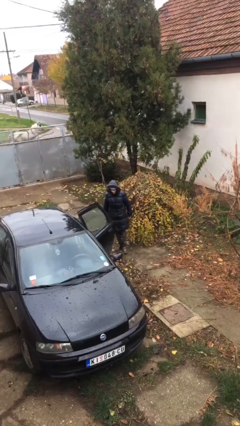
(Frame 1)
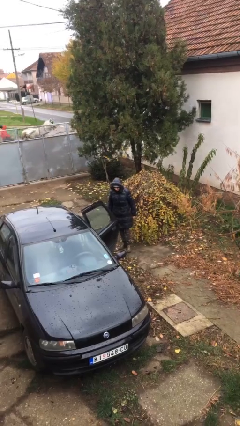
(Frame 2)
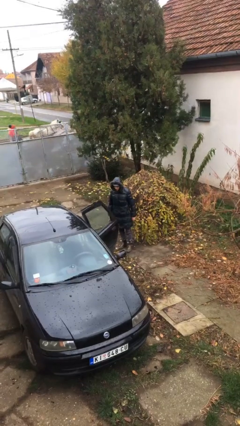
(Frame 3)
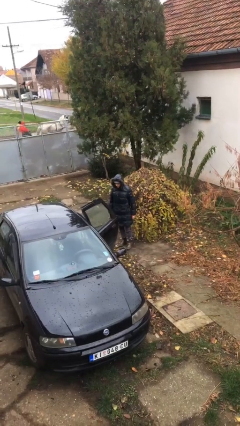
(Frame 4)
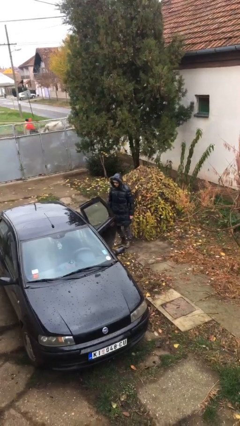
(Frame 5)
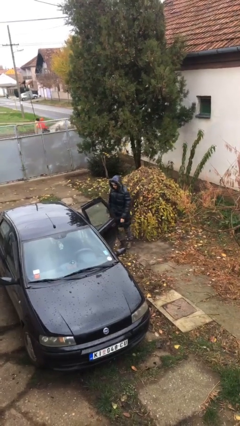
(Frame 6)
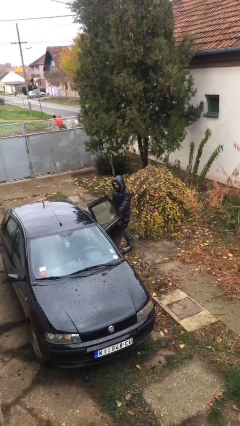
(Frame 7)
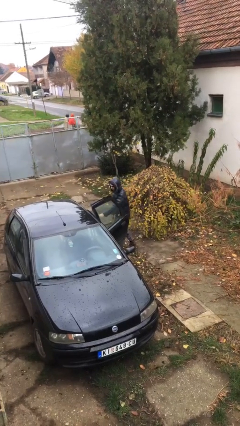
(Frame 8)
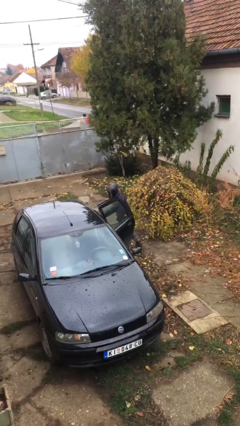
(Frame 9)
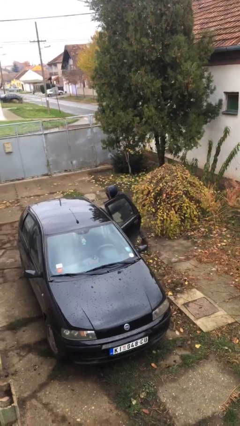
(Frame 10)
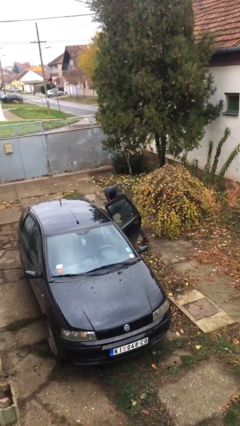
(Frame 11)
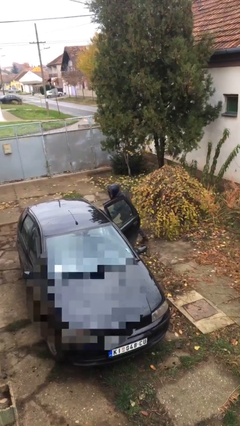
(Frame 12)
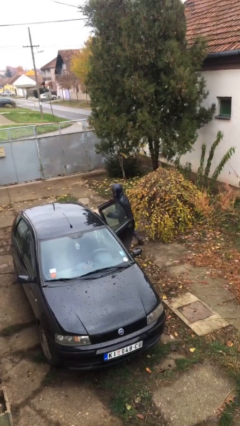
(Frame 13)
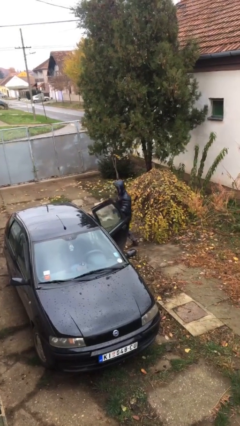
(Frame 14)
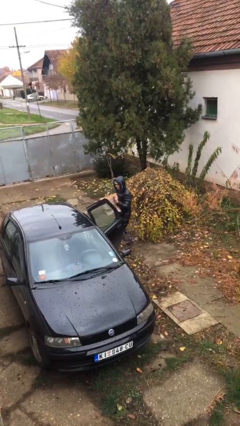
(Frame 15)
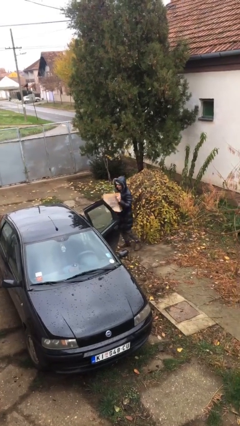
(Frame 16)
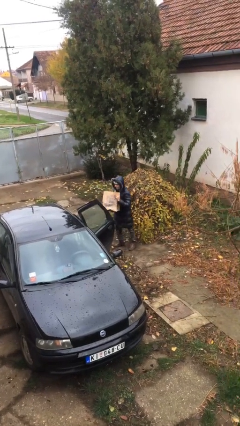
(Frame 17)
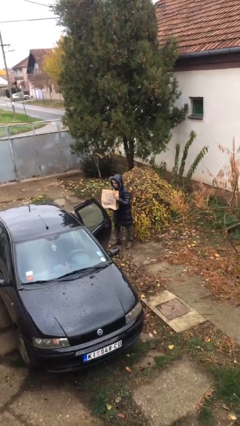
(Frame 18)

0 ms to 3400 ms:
person unloads car

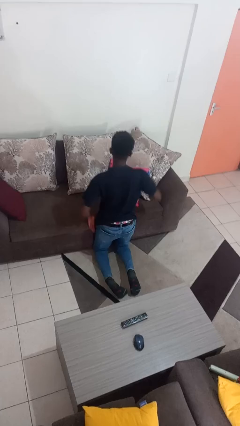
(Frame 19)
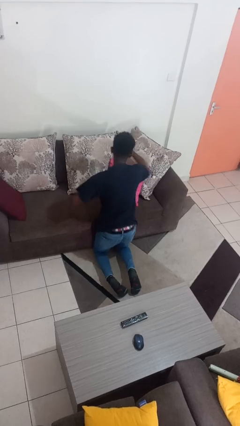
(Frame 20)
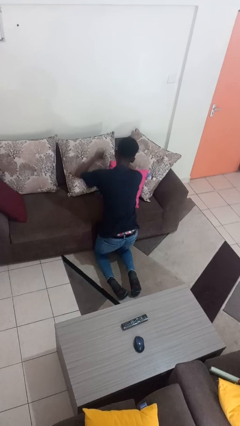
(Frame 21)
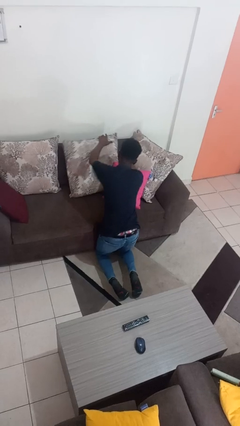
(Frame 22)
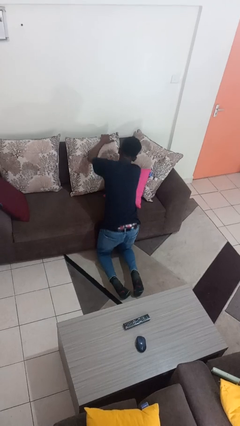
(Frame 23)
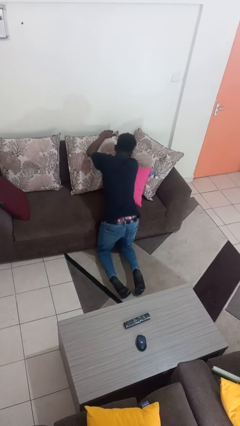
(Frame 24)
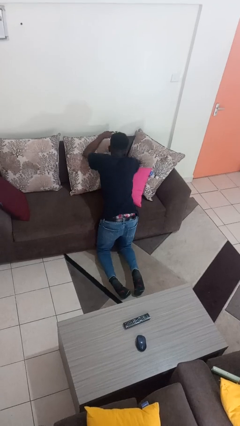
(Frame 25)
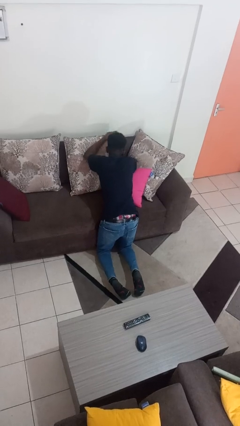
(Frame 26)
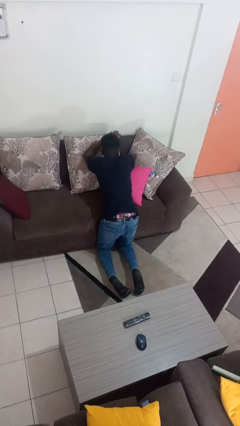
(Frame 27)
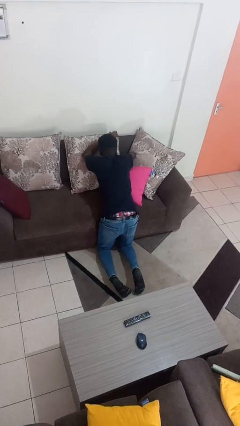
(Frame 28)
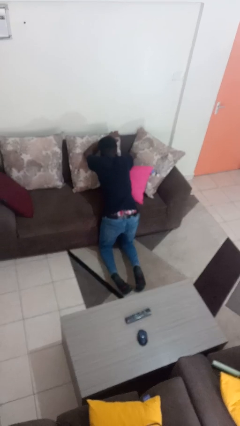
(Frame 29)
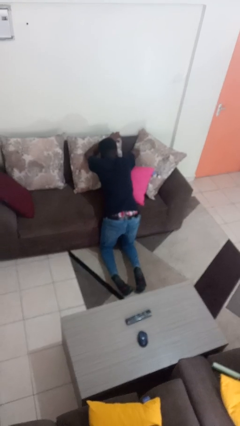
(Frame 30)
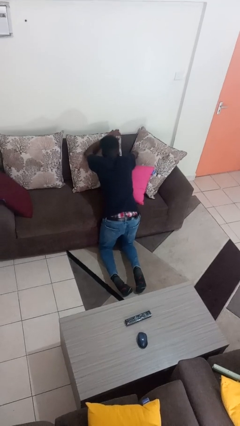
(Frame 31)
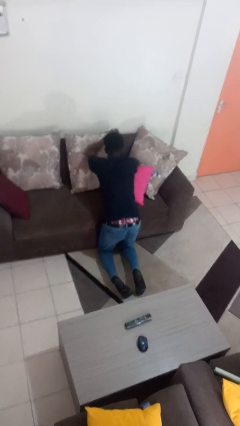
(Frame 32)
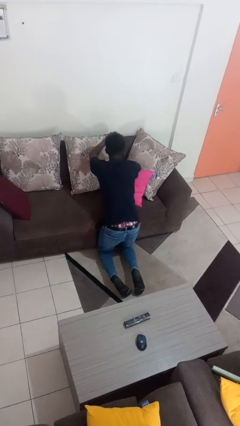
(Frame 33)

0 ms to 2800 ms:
person searches in couch

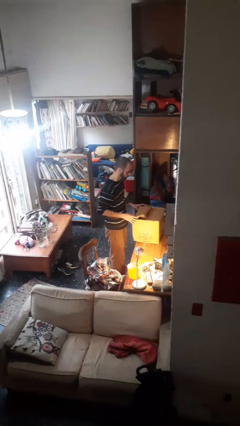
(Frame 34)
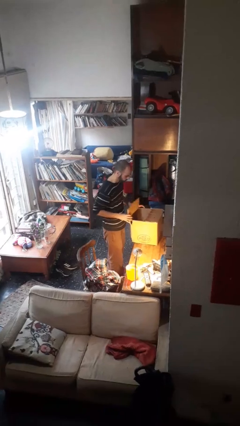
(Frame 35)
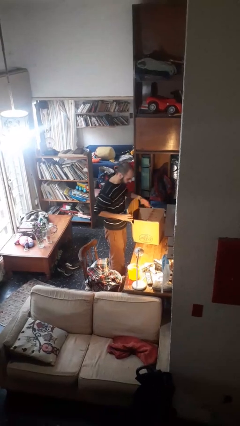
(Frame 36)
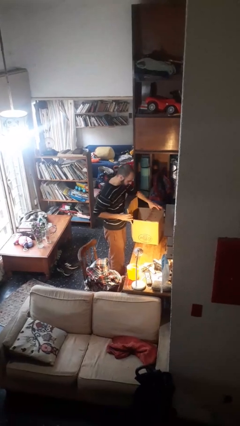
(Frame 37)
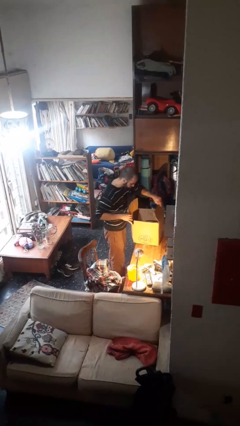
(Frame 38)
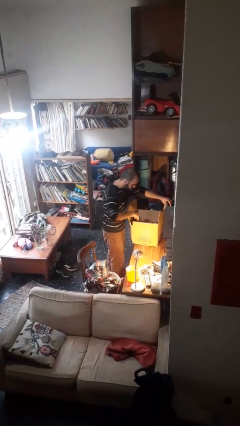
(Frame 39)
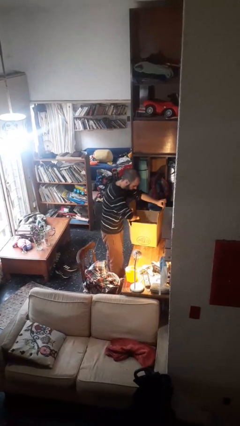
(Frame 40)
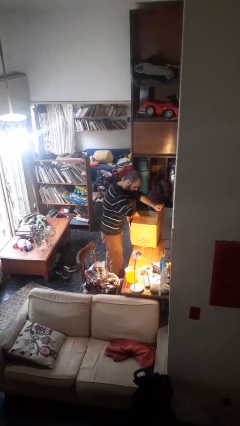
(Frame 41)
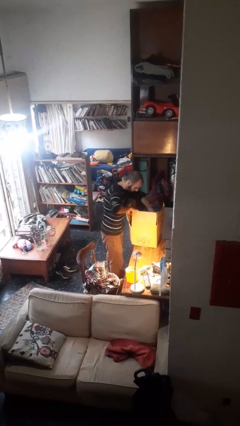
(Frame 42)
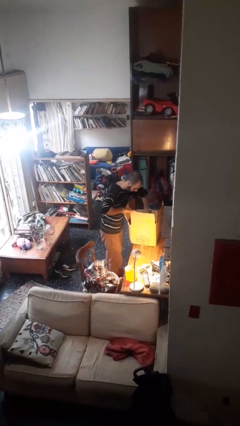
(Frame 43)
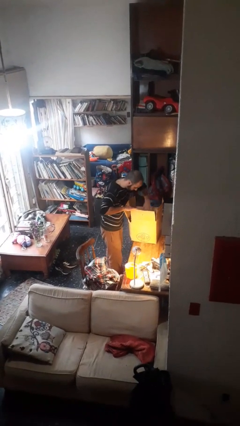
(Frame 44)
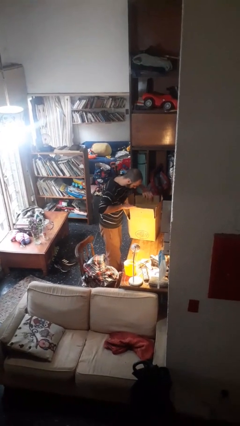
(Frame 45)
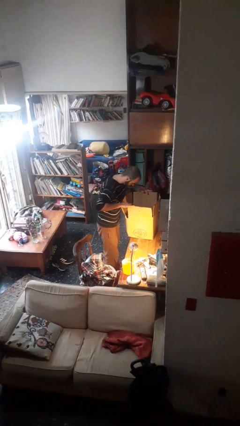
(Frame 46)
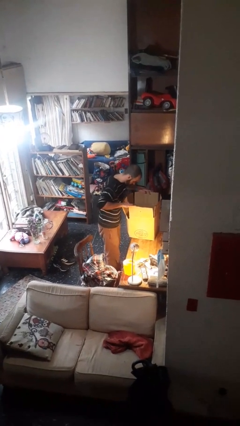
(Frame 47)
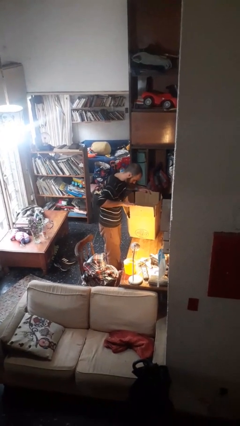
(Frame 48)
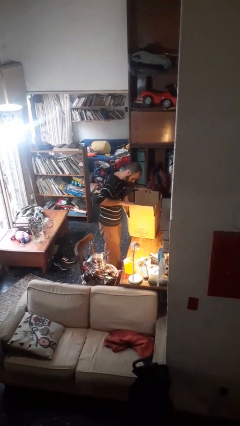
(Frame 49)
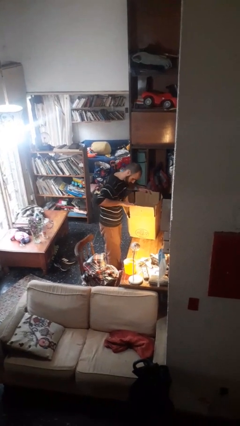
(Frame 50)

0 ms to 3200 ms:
person opens box

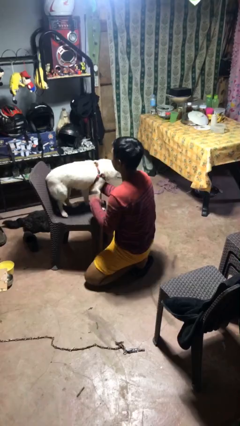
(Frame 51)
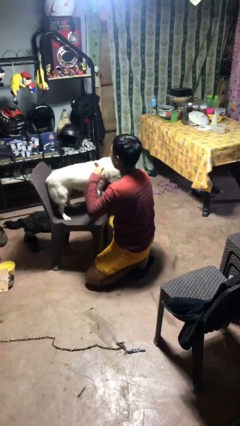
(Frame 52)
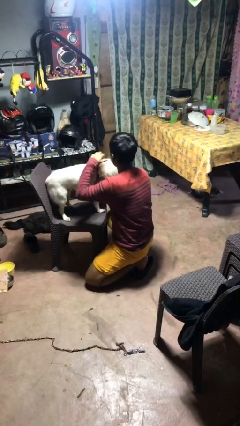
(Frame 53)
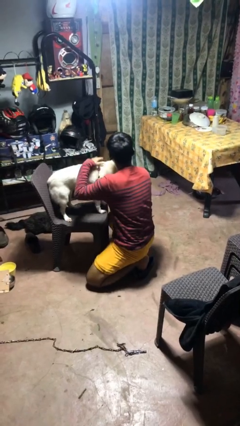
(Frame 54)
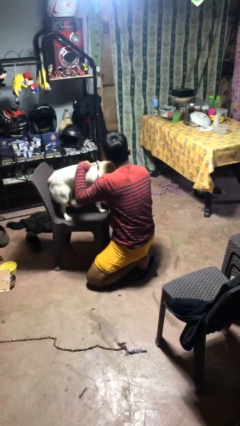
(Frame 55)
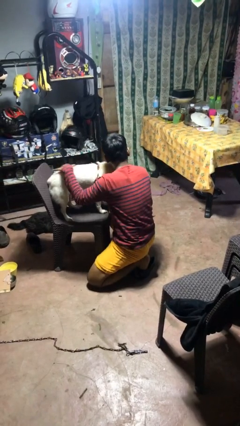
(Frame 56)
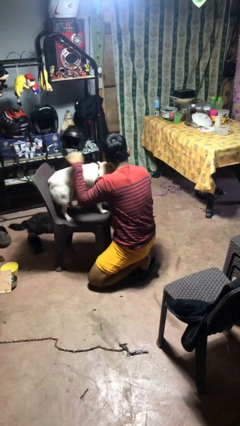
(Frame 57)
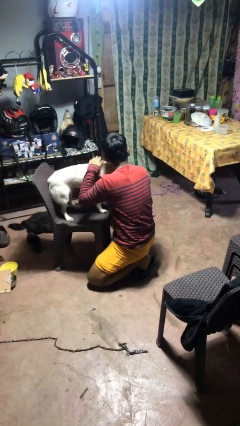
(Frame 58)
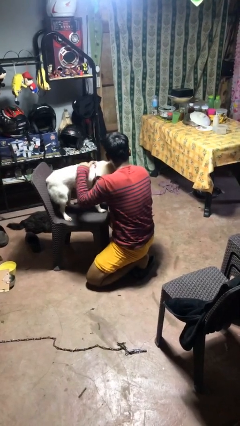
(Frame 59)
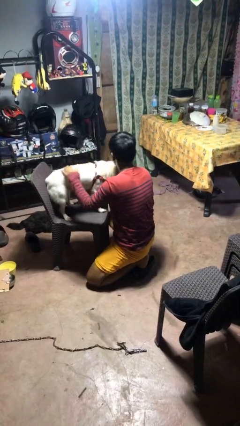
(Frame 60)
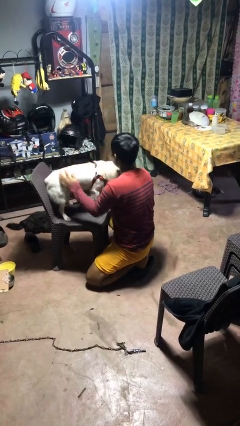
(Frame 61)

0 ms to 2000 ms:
person hugs dog

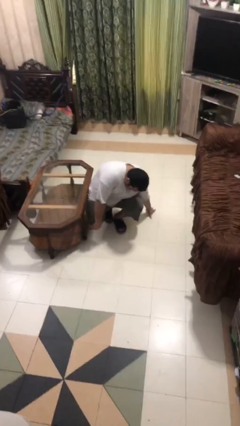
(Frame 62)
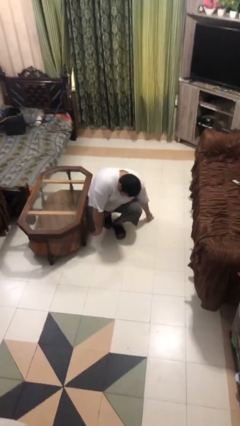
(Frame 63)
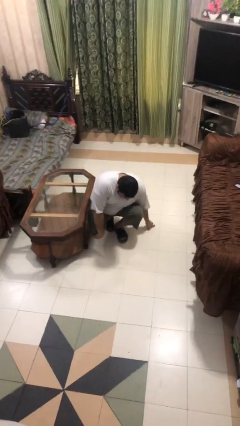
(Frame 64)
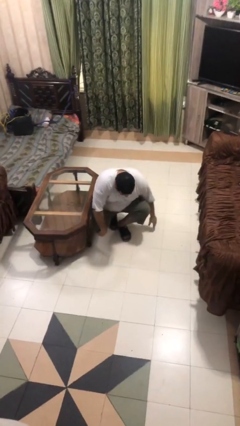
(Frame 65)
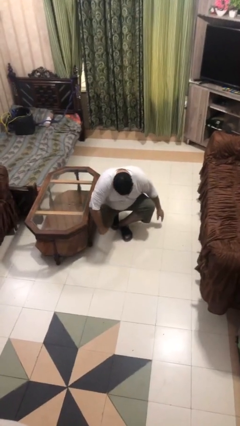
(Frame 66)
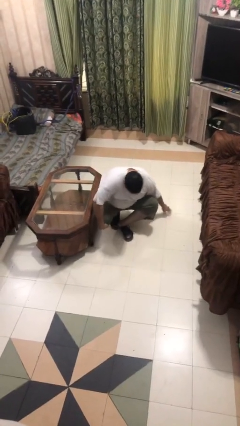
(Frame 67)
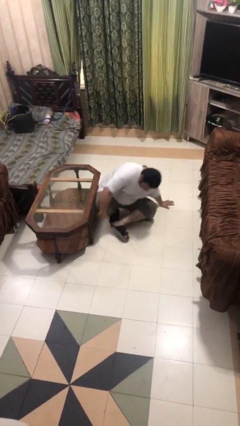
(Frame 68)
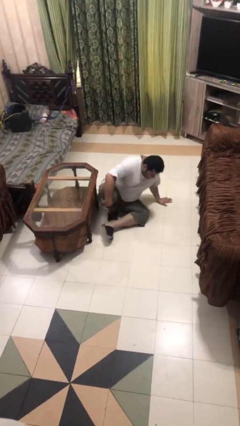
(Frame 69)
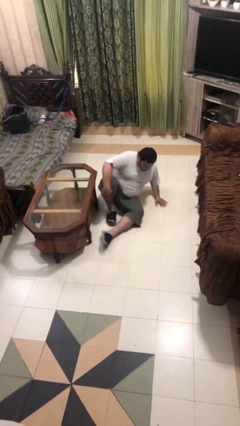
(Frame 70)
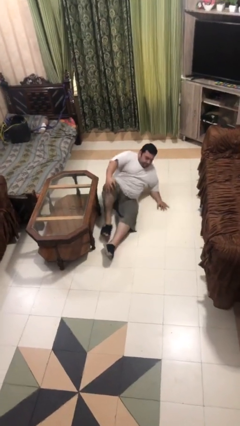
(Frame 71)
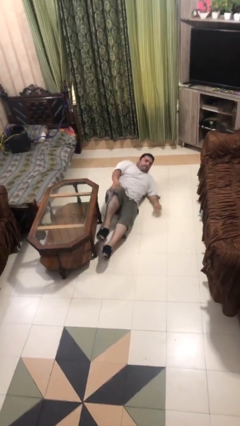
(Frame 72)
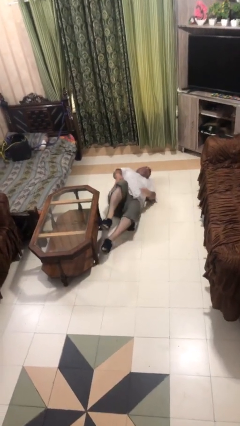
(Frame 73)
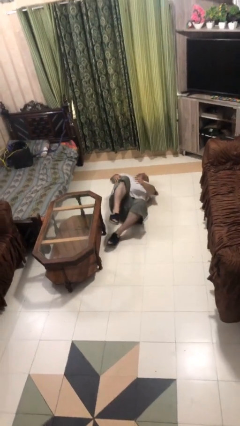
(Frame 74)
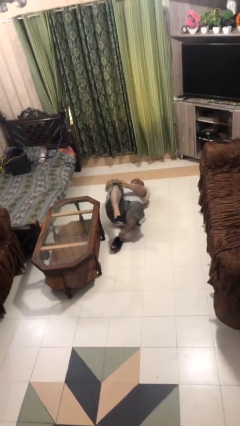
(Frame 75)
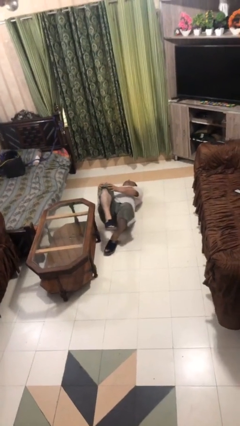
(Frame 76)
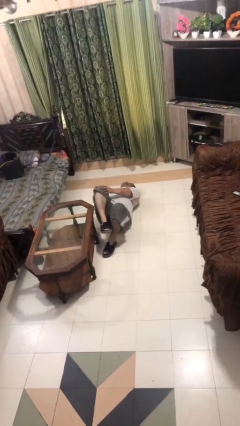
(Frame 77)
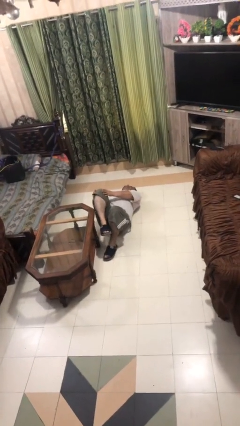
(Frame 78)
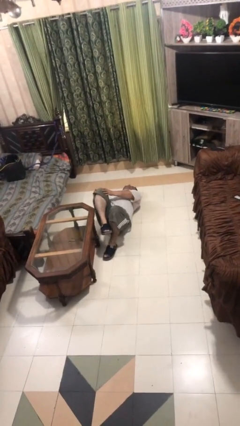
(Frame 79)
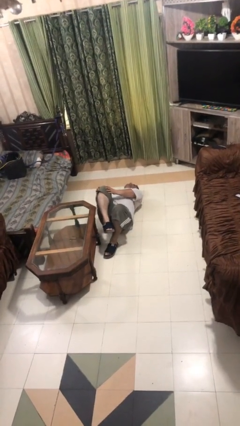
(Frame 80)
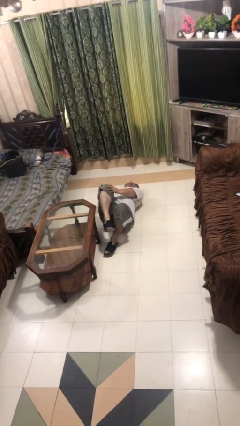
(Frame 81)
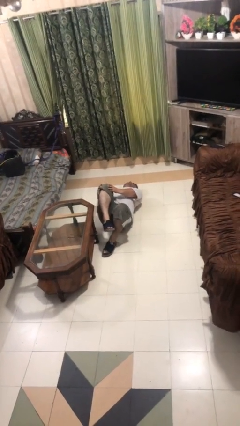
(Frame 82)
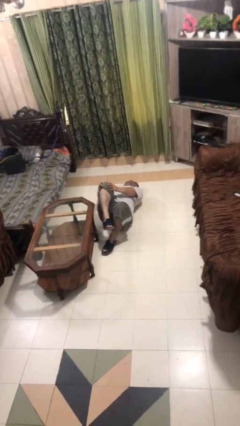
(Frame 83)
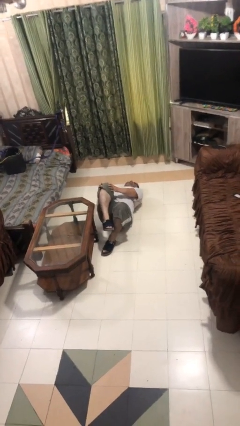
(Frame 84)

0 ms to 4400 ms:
person lies down on floor

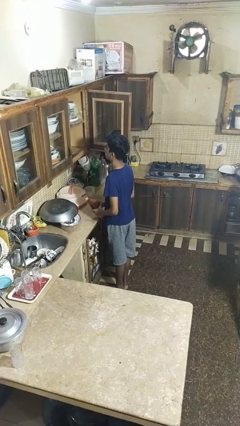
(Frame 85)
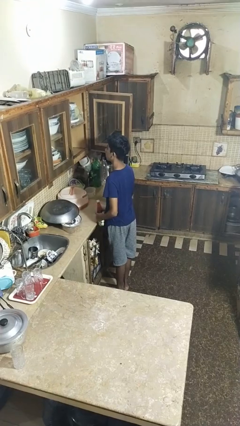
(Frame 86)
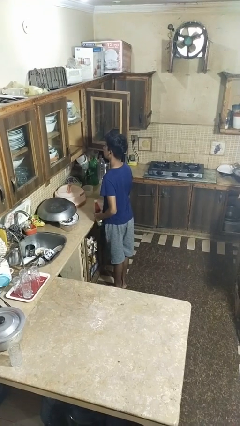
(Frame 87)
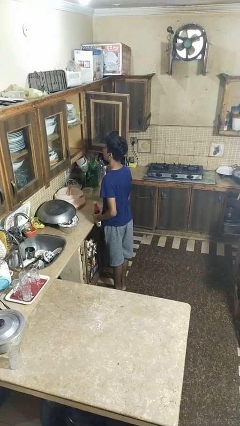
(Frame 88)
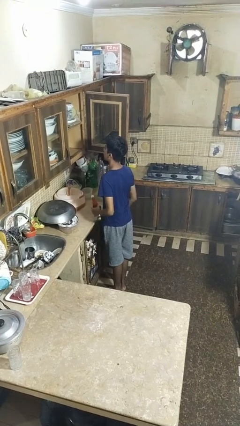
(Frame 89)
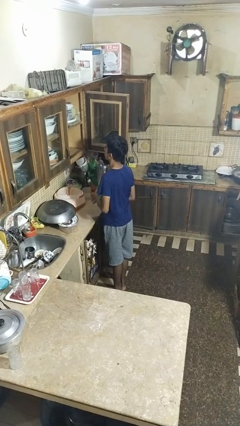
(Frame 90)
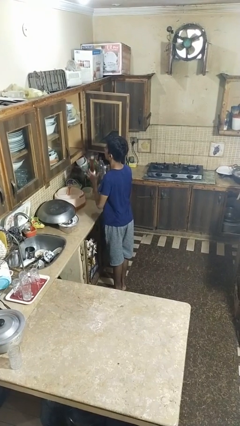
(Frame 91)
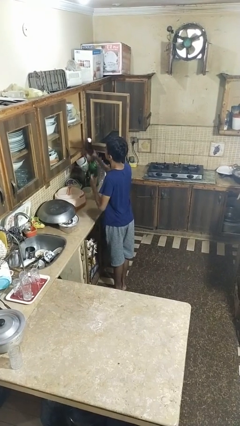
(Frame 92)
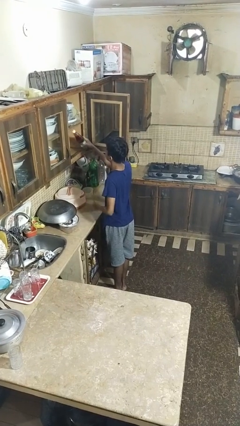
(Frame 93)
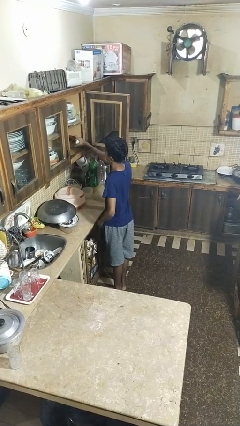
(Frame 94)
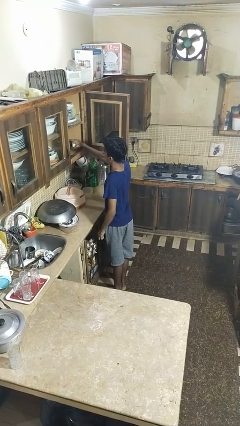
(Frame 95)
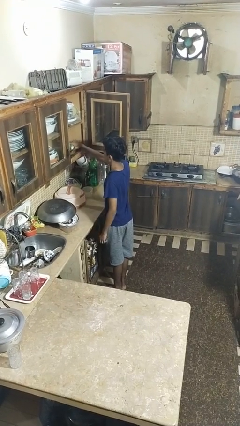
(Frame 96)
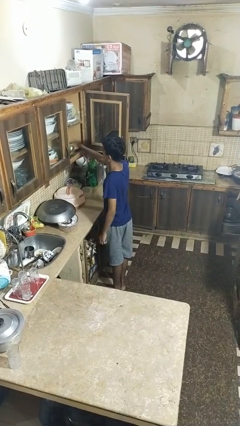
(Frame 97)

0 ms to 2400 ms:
person puts object in cabinet
